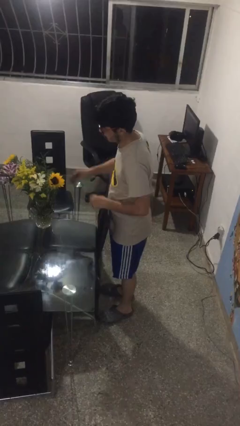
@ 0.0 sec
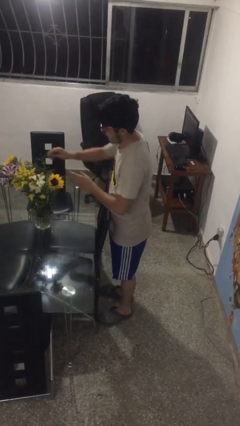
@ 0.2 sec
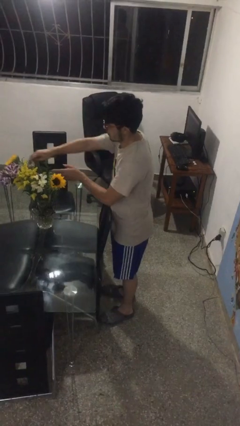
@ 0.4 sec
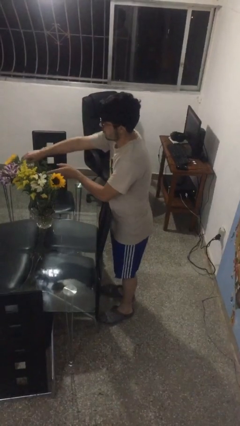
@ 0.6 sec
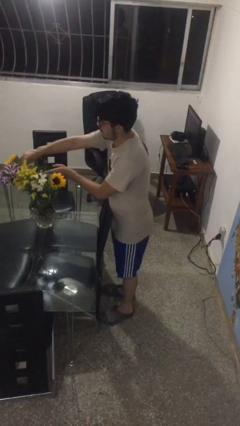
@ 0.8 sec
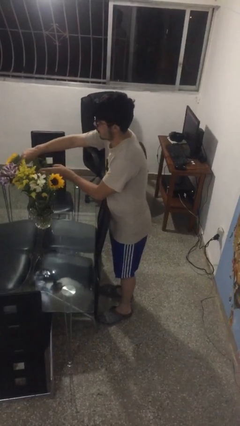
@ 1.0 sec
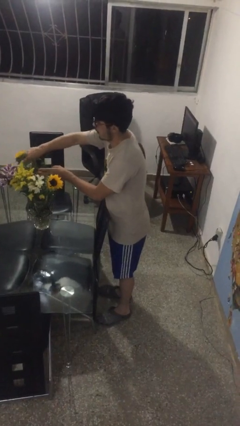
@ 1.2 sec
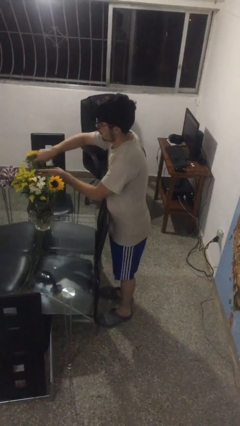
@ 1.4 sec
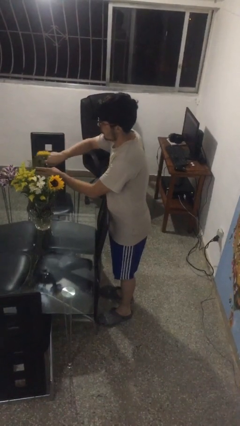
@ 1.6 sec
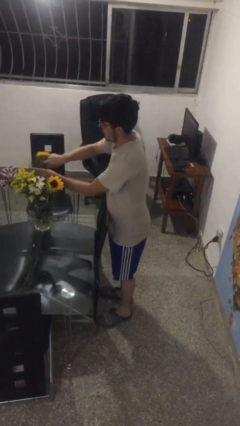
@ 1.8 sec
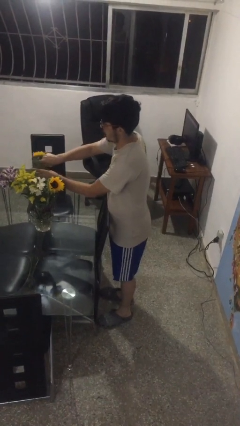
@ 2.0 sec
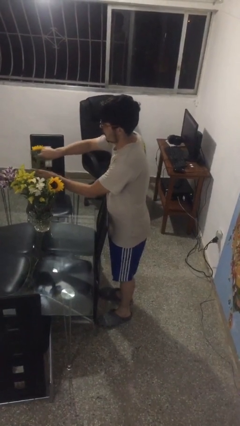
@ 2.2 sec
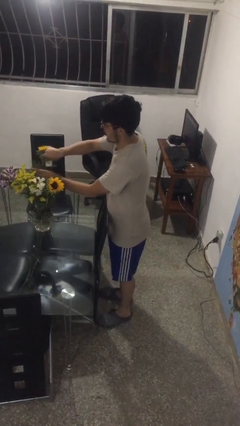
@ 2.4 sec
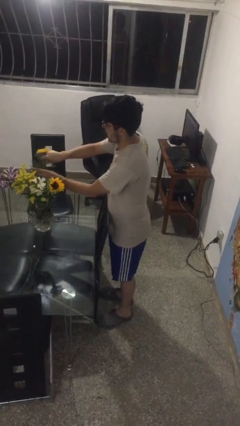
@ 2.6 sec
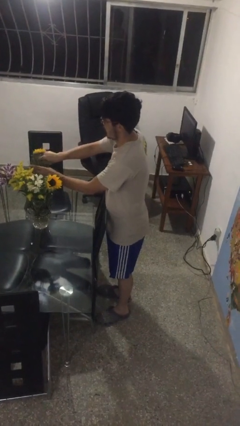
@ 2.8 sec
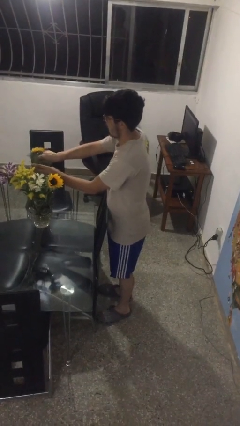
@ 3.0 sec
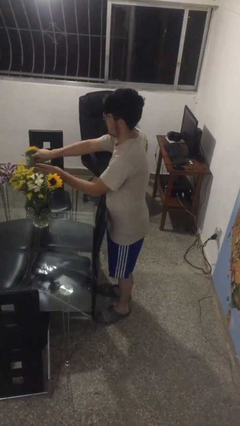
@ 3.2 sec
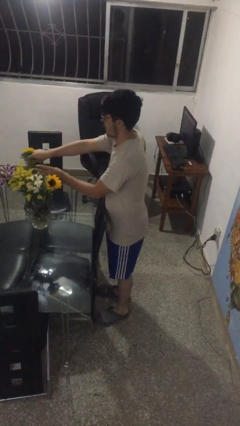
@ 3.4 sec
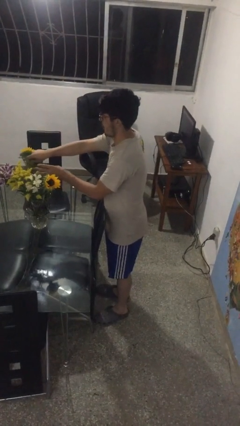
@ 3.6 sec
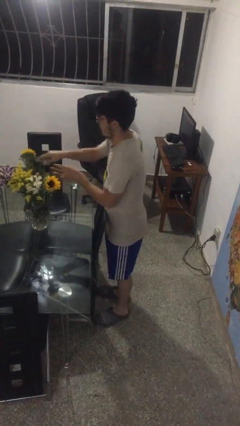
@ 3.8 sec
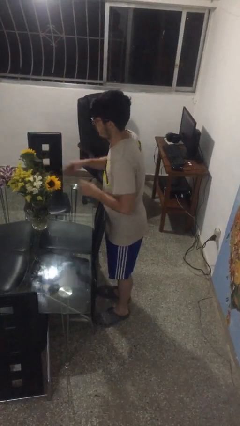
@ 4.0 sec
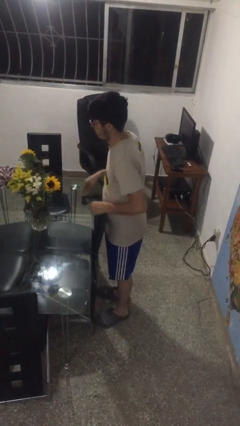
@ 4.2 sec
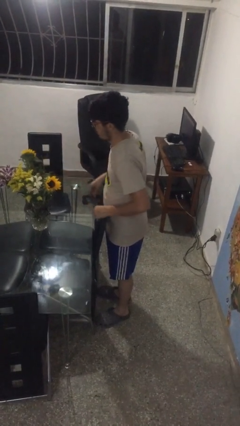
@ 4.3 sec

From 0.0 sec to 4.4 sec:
person arranges flowers in vase

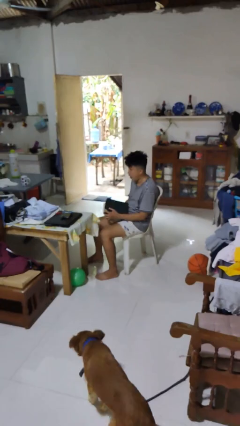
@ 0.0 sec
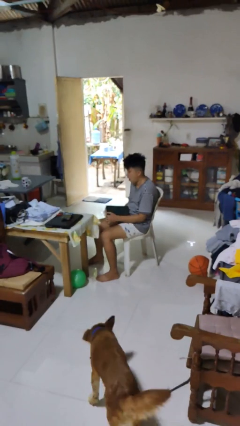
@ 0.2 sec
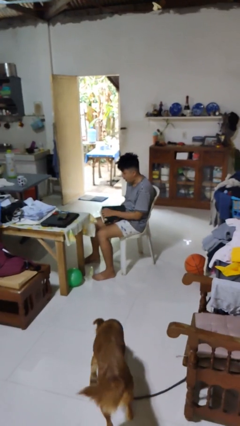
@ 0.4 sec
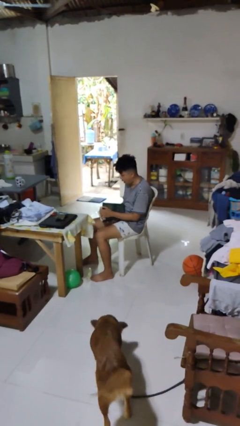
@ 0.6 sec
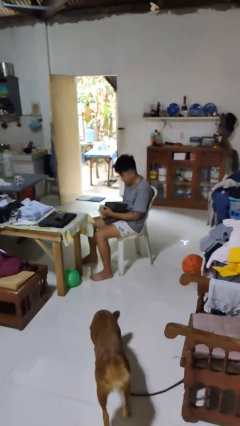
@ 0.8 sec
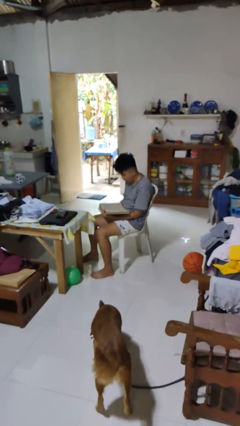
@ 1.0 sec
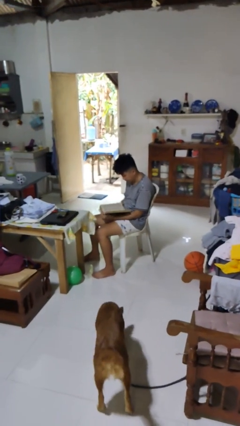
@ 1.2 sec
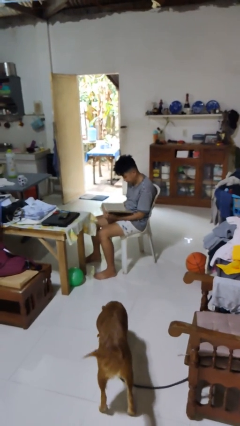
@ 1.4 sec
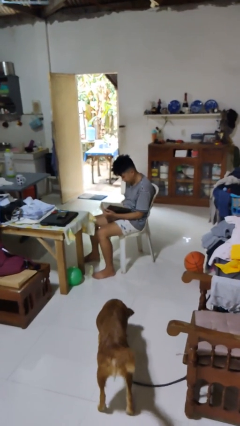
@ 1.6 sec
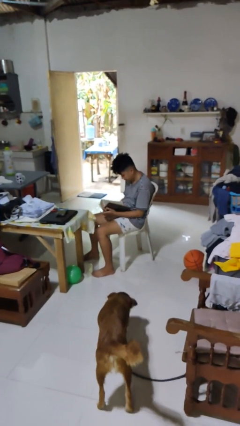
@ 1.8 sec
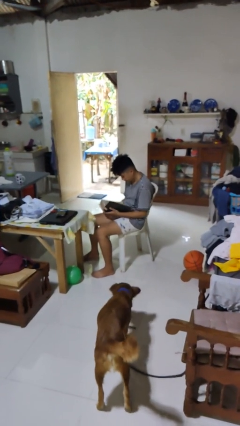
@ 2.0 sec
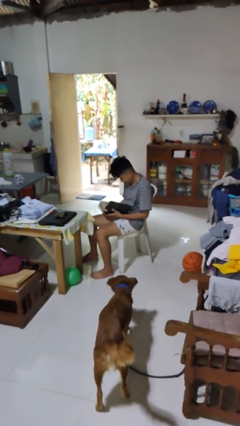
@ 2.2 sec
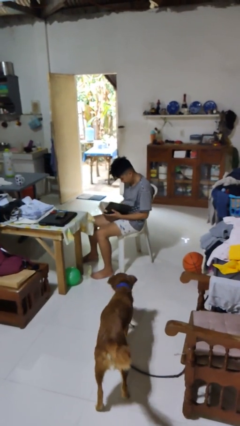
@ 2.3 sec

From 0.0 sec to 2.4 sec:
person reads book

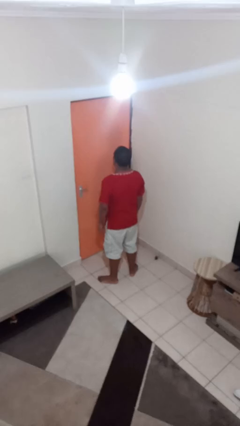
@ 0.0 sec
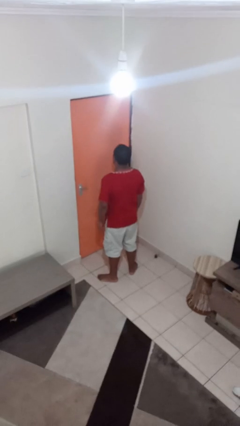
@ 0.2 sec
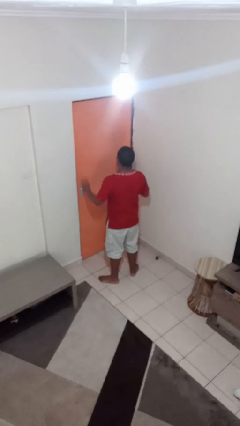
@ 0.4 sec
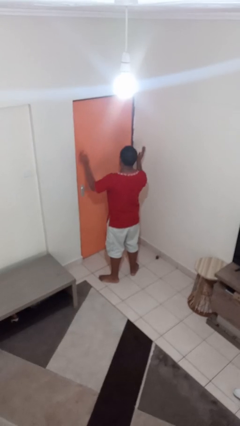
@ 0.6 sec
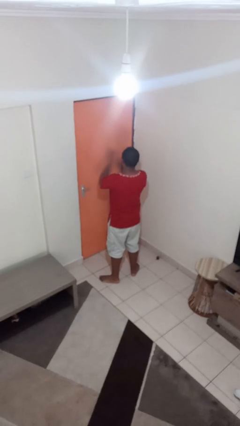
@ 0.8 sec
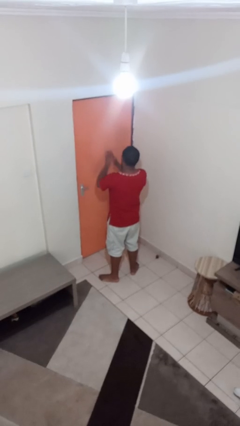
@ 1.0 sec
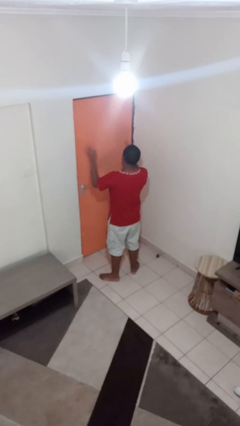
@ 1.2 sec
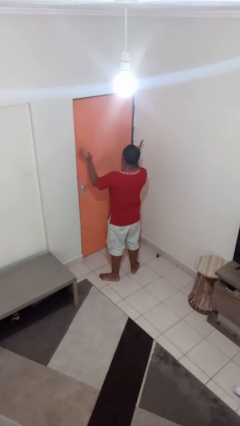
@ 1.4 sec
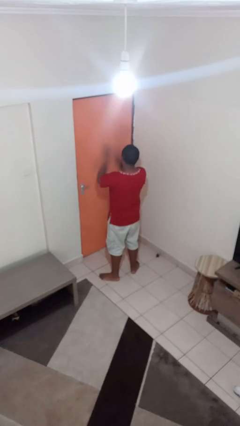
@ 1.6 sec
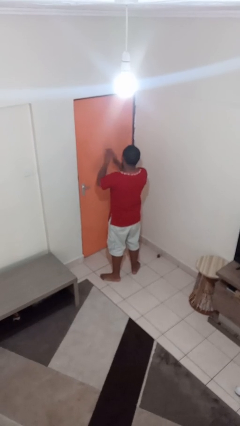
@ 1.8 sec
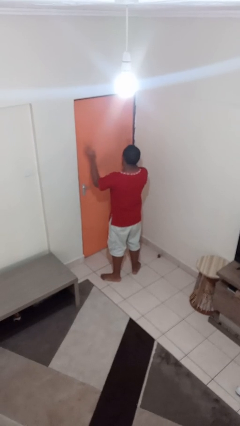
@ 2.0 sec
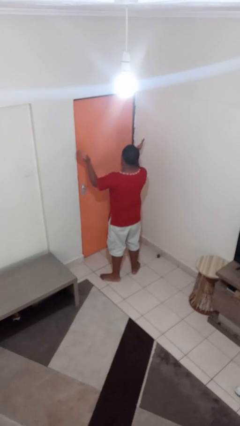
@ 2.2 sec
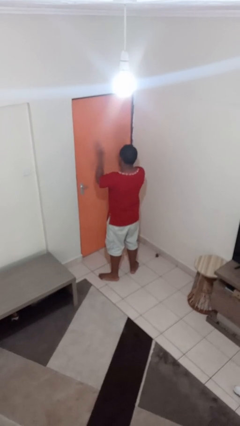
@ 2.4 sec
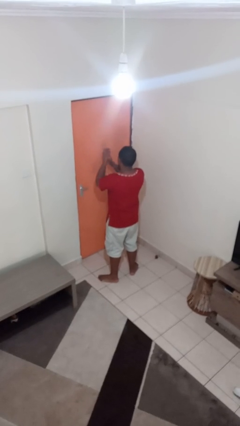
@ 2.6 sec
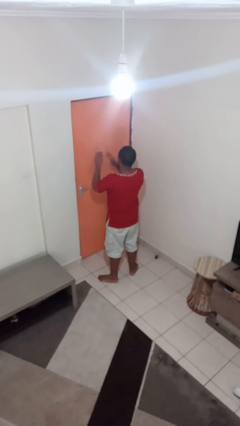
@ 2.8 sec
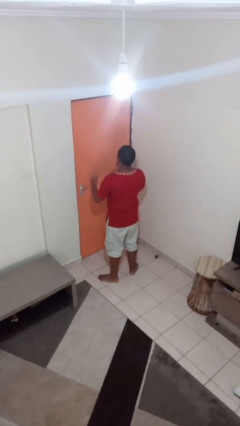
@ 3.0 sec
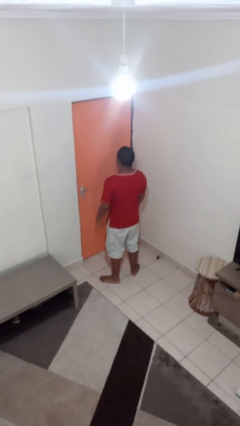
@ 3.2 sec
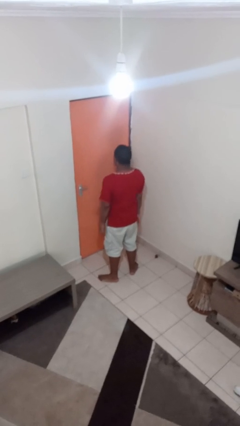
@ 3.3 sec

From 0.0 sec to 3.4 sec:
person claps hands

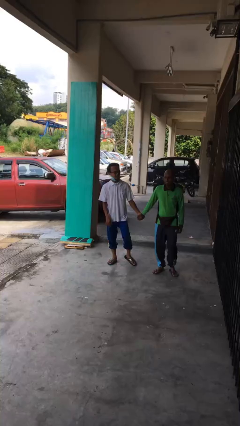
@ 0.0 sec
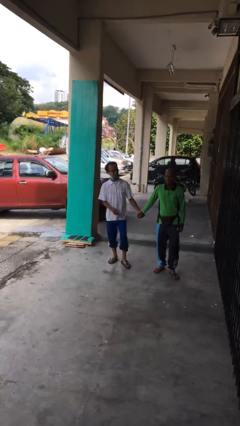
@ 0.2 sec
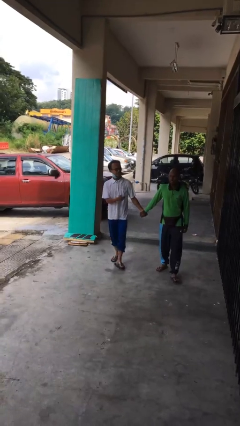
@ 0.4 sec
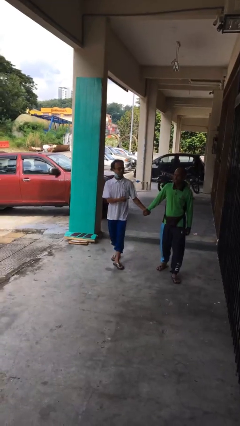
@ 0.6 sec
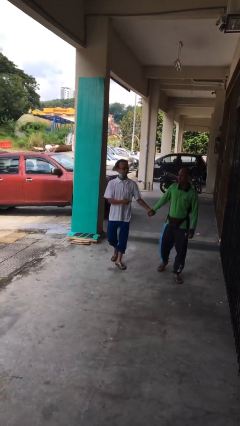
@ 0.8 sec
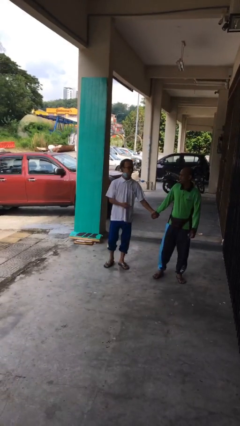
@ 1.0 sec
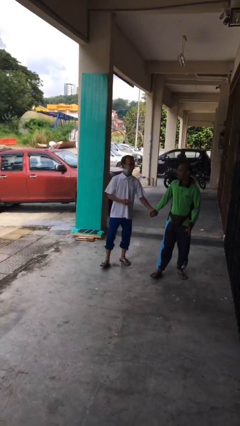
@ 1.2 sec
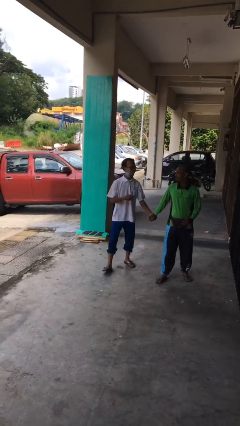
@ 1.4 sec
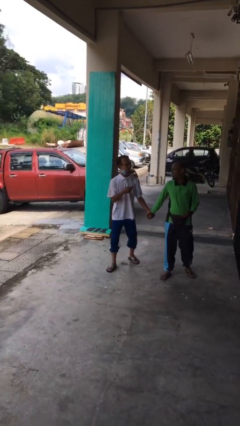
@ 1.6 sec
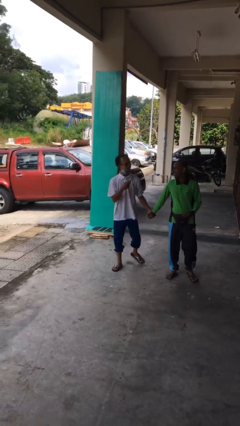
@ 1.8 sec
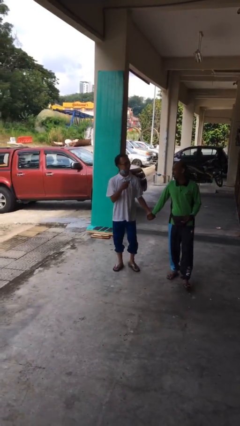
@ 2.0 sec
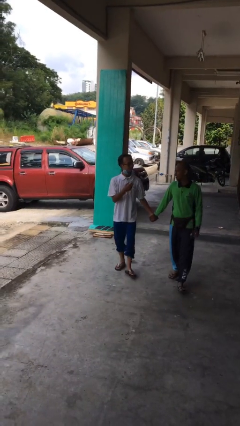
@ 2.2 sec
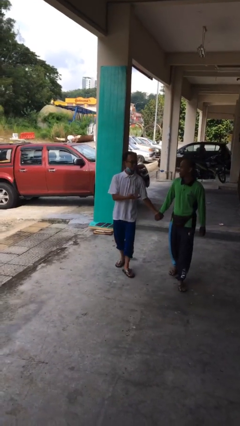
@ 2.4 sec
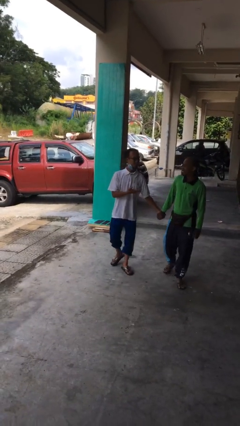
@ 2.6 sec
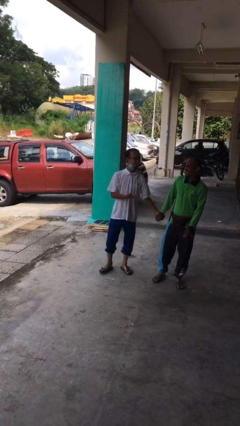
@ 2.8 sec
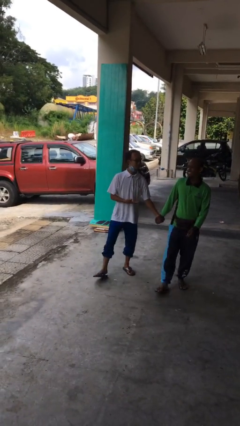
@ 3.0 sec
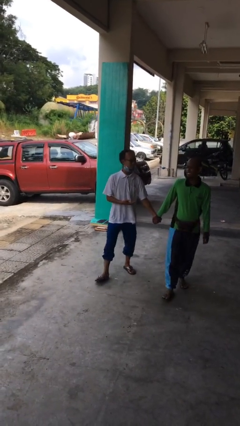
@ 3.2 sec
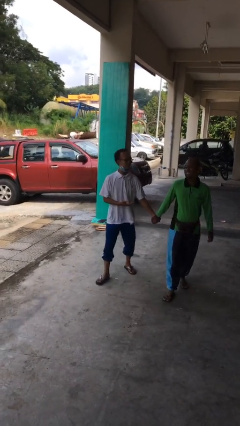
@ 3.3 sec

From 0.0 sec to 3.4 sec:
person holds hand

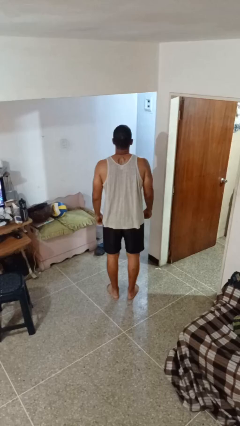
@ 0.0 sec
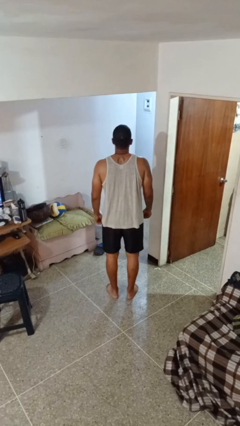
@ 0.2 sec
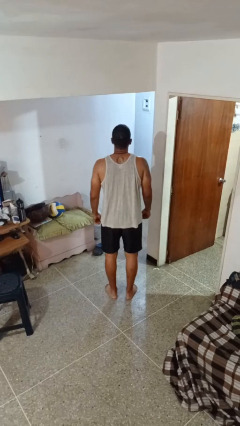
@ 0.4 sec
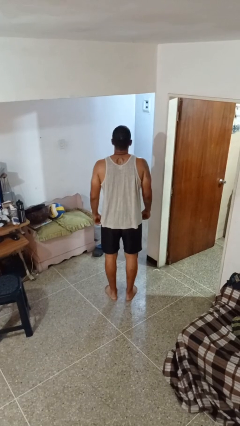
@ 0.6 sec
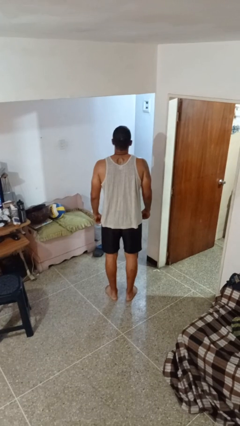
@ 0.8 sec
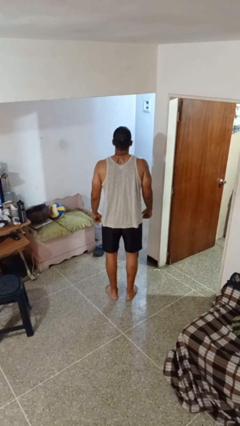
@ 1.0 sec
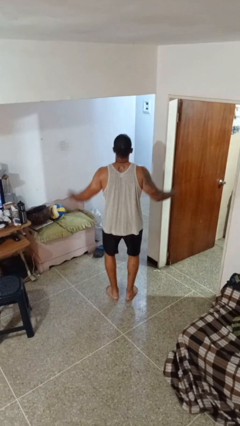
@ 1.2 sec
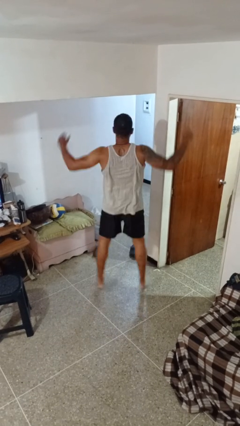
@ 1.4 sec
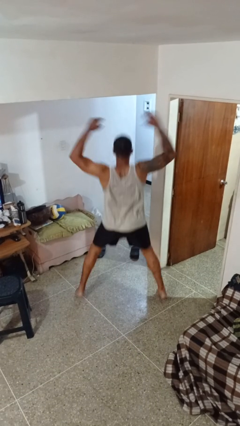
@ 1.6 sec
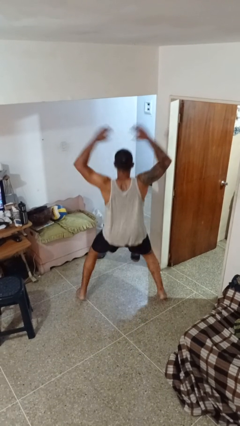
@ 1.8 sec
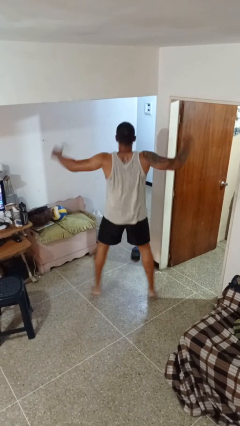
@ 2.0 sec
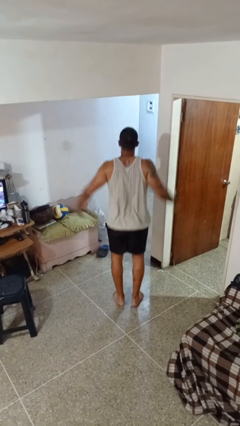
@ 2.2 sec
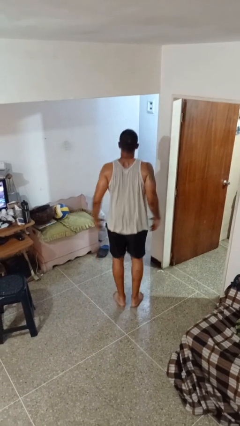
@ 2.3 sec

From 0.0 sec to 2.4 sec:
person exercises with jumping jacks

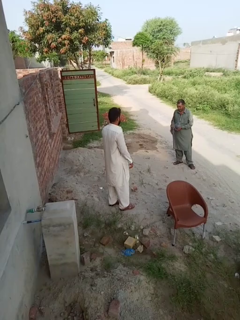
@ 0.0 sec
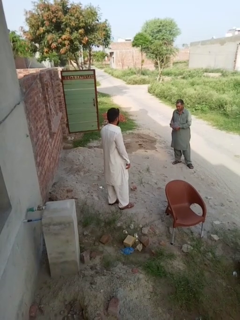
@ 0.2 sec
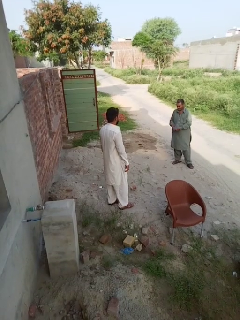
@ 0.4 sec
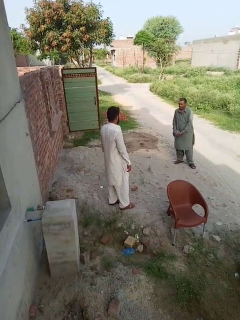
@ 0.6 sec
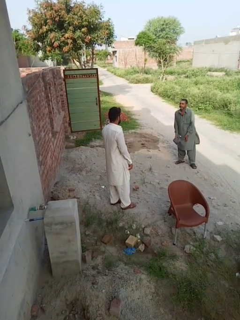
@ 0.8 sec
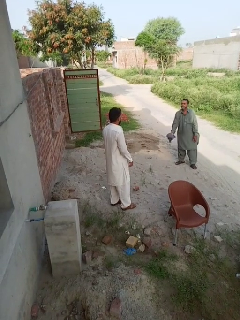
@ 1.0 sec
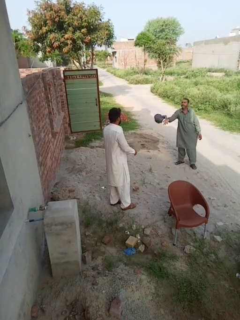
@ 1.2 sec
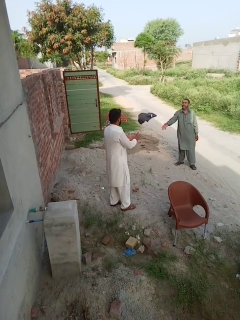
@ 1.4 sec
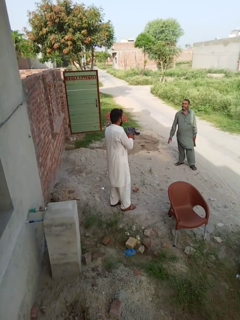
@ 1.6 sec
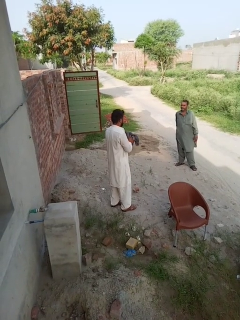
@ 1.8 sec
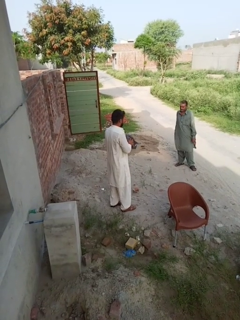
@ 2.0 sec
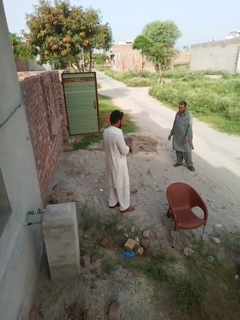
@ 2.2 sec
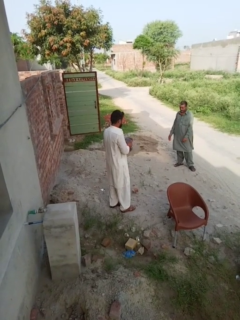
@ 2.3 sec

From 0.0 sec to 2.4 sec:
person catches object from person
